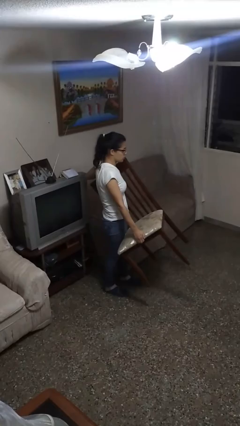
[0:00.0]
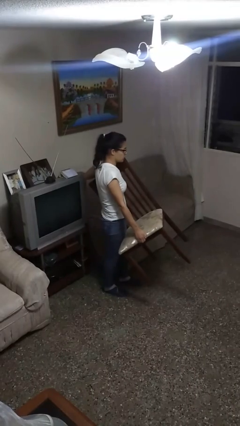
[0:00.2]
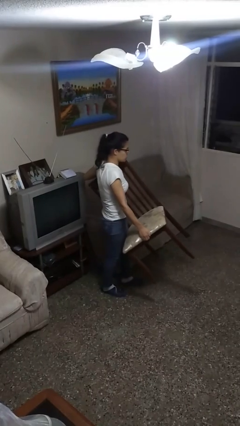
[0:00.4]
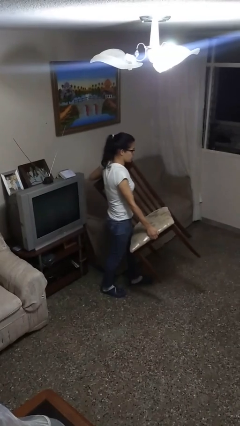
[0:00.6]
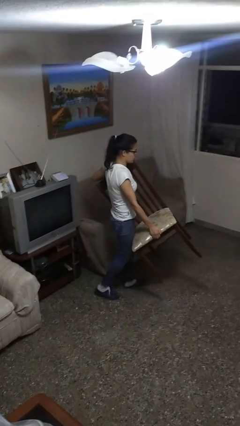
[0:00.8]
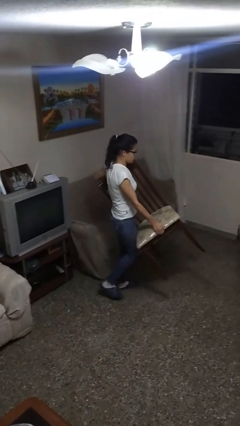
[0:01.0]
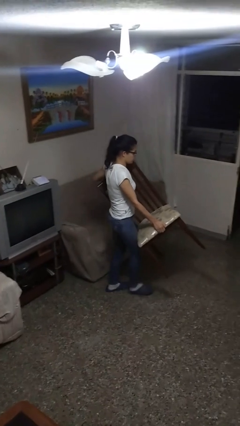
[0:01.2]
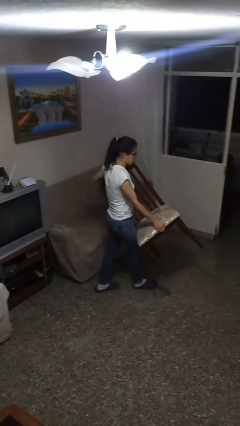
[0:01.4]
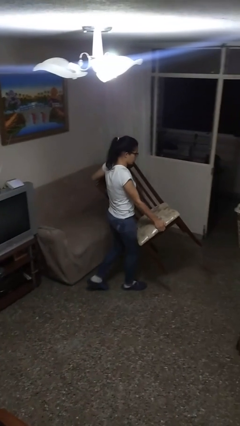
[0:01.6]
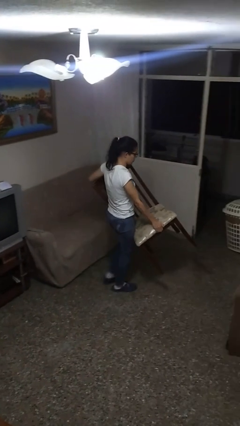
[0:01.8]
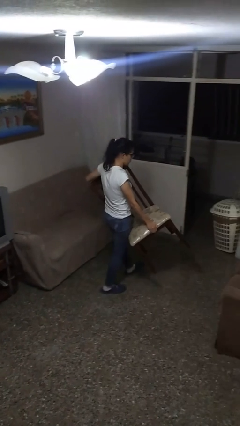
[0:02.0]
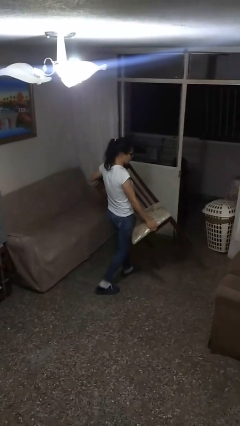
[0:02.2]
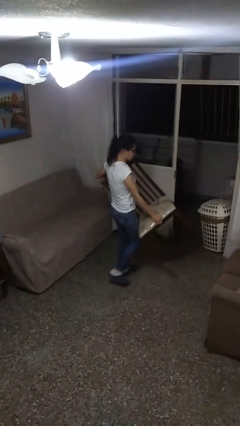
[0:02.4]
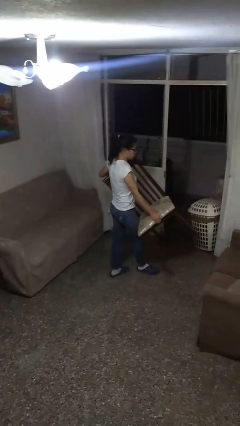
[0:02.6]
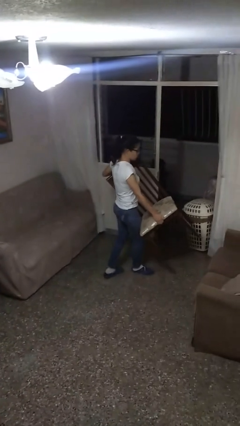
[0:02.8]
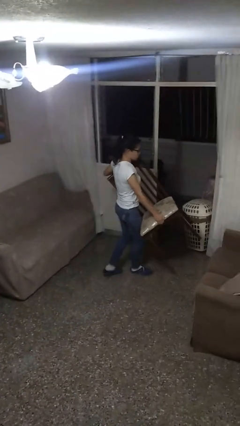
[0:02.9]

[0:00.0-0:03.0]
person carries furniture

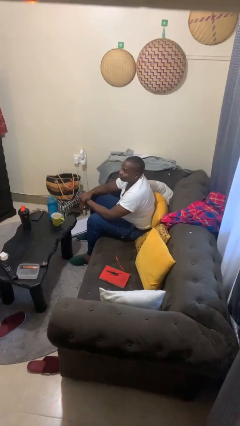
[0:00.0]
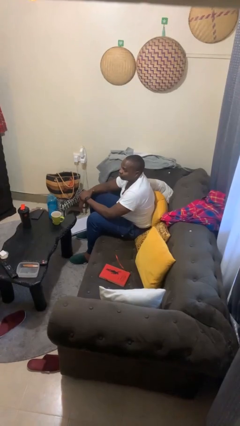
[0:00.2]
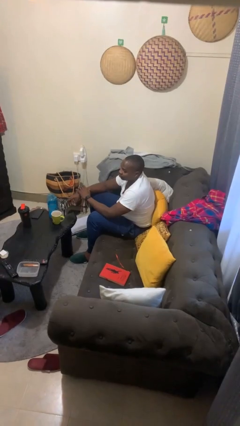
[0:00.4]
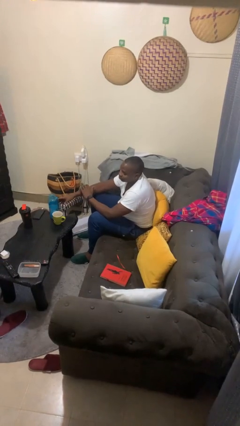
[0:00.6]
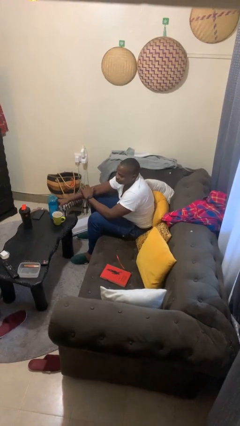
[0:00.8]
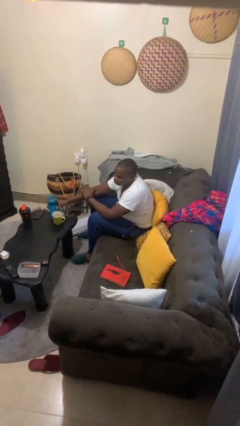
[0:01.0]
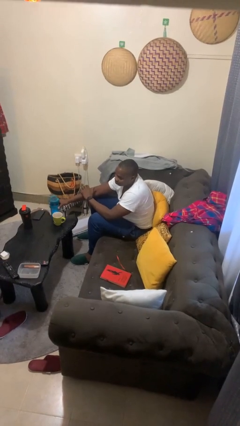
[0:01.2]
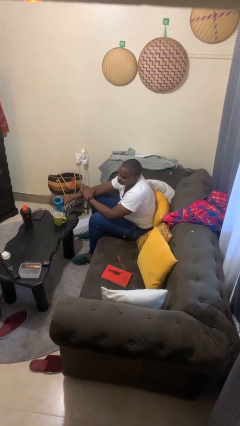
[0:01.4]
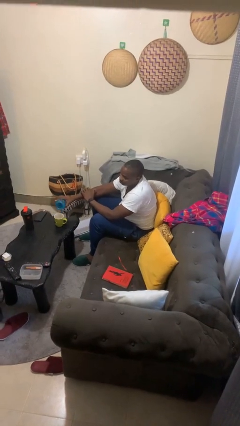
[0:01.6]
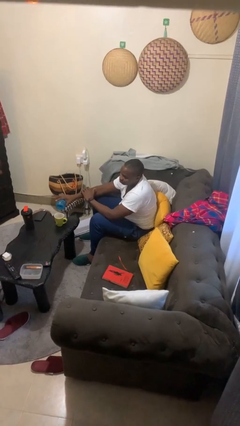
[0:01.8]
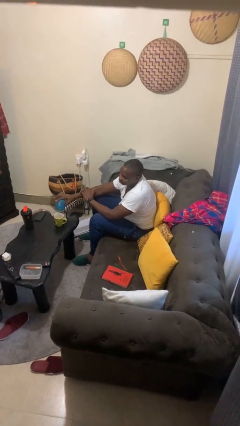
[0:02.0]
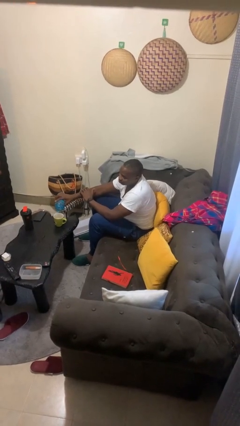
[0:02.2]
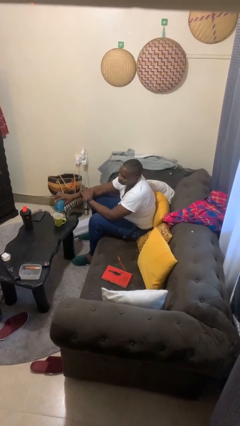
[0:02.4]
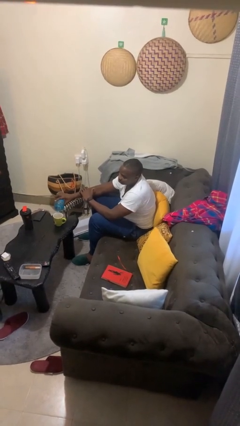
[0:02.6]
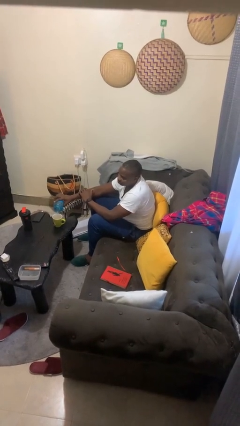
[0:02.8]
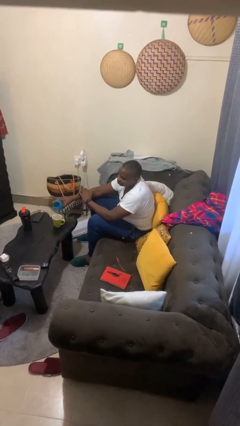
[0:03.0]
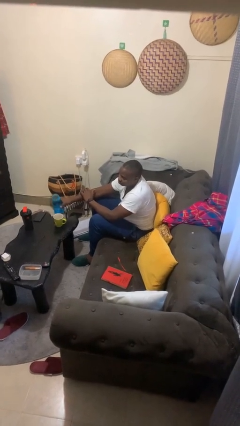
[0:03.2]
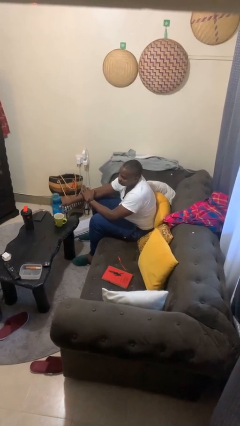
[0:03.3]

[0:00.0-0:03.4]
person pours liquid into cup

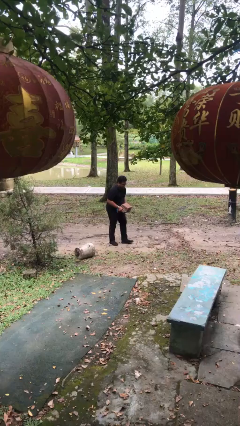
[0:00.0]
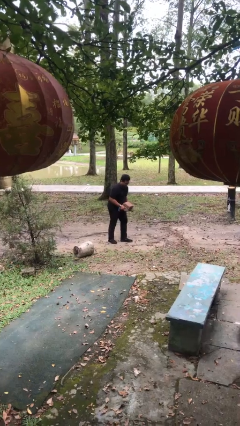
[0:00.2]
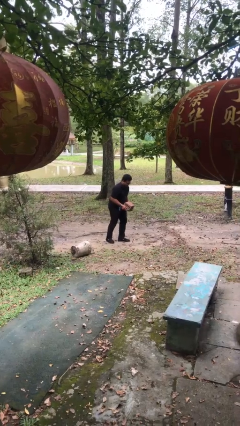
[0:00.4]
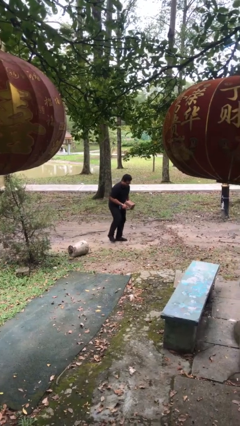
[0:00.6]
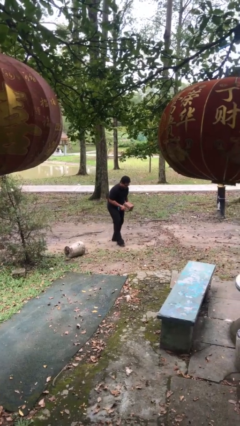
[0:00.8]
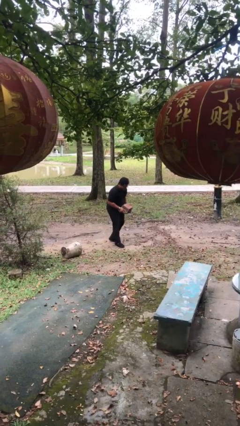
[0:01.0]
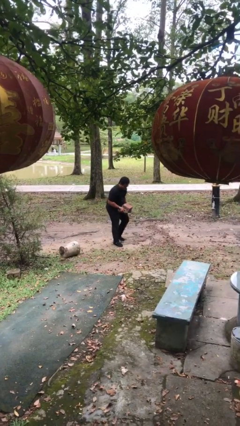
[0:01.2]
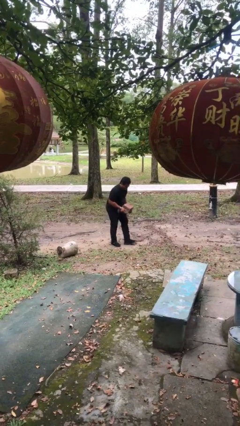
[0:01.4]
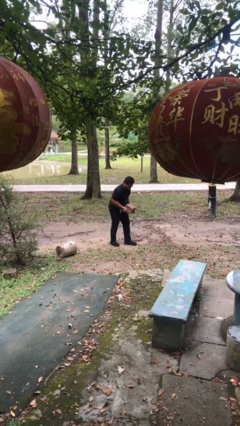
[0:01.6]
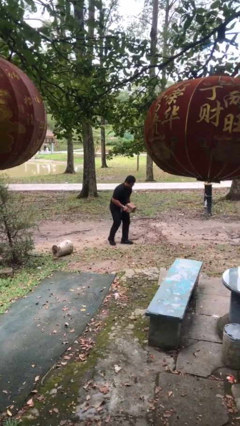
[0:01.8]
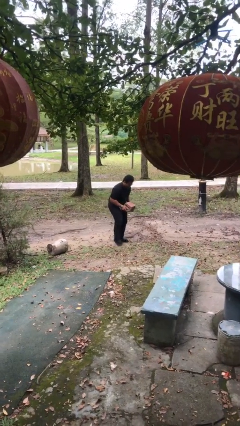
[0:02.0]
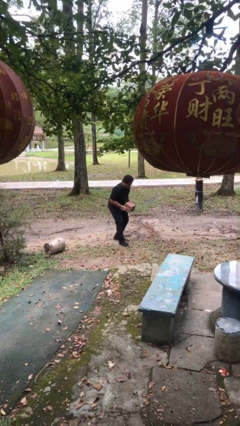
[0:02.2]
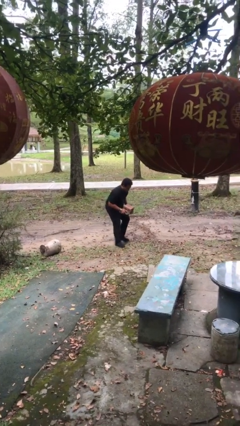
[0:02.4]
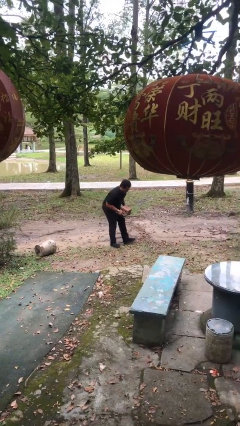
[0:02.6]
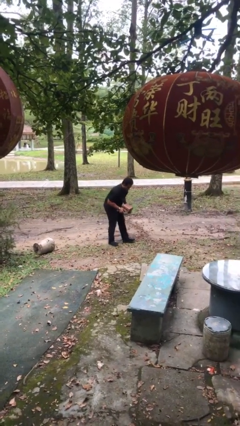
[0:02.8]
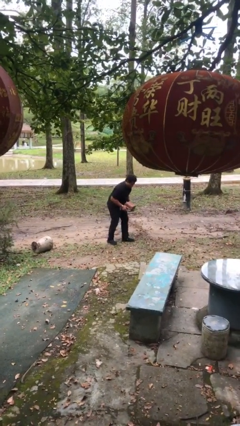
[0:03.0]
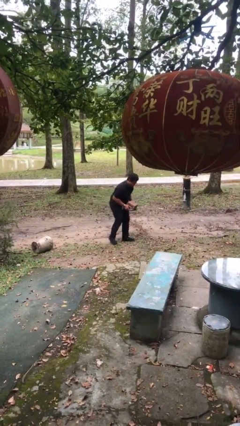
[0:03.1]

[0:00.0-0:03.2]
person carries heavy object

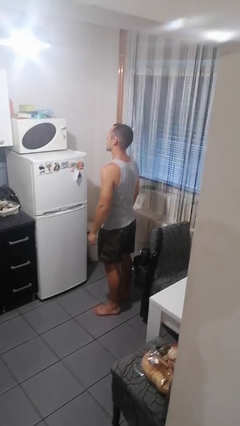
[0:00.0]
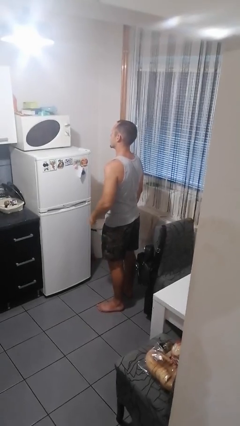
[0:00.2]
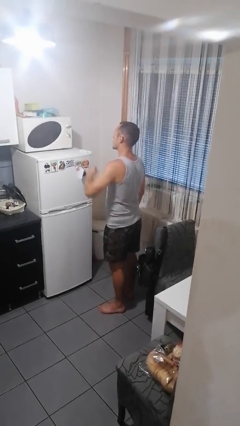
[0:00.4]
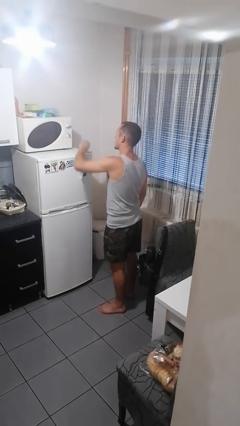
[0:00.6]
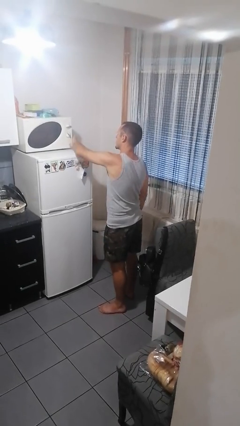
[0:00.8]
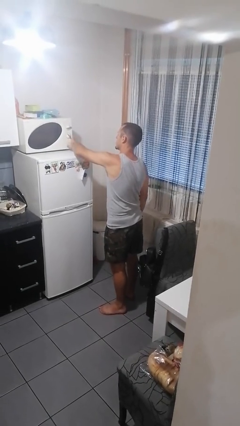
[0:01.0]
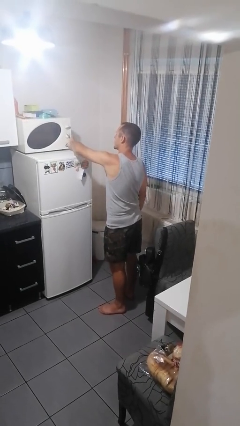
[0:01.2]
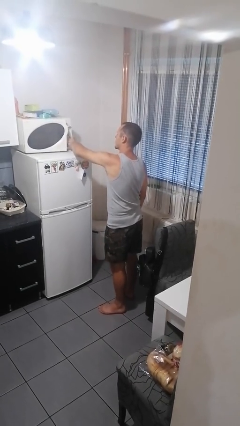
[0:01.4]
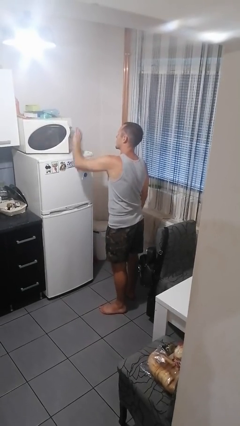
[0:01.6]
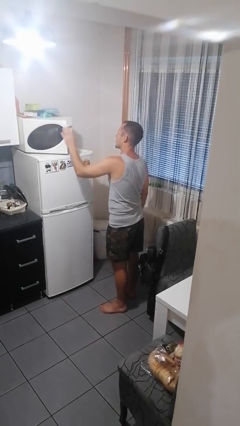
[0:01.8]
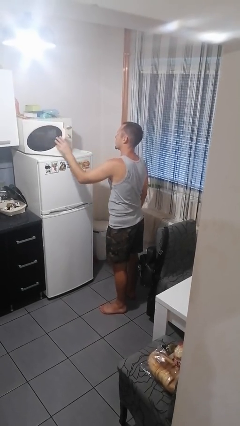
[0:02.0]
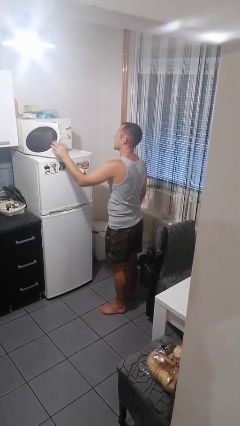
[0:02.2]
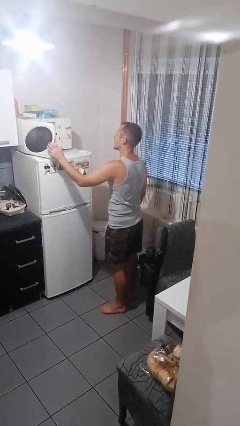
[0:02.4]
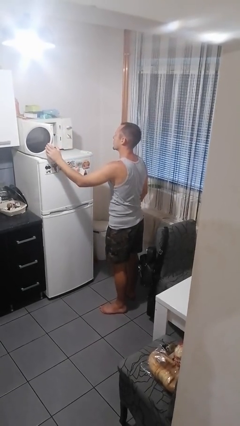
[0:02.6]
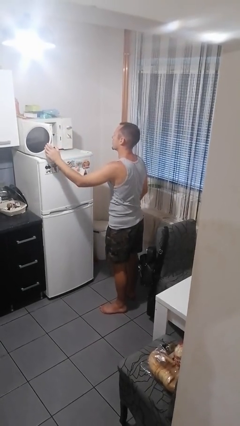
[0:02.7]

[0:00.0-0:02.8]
person opens microwave

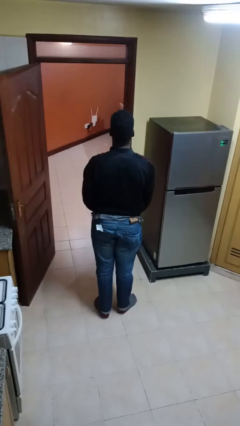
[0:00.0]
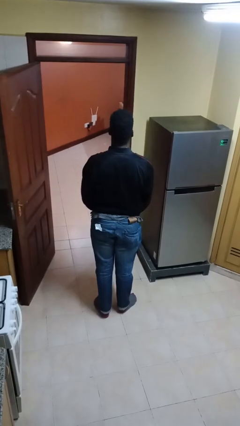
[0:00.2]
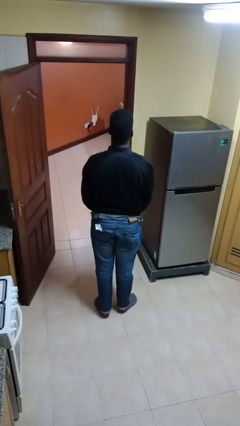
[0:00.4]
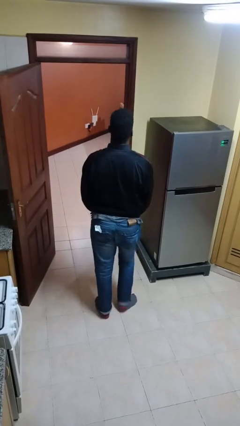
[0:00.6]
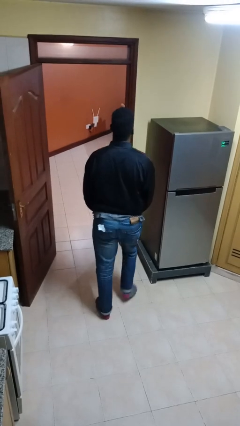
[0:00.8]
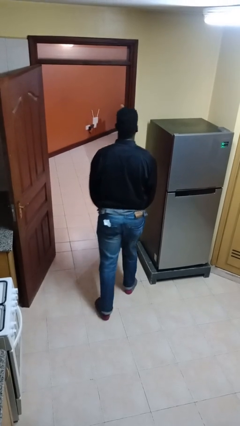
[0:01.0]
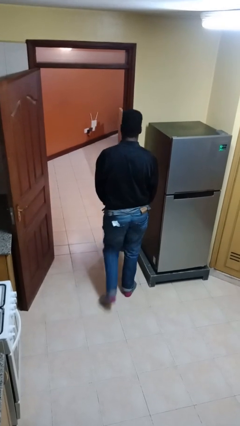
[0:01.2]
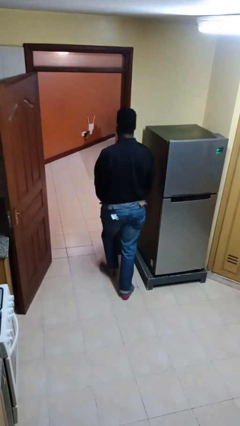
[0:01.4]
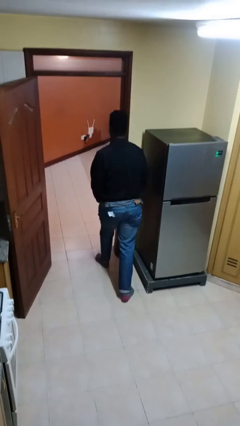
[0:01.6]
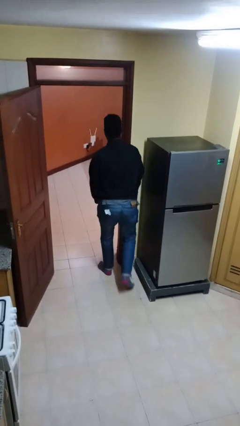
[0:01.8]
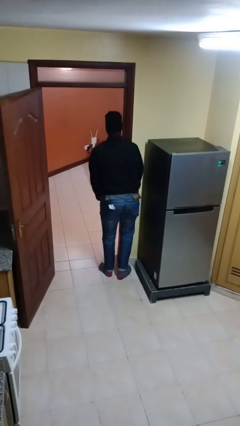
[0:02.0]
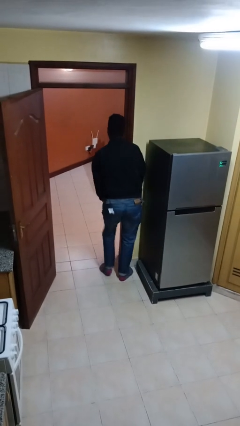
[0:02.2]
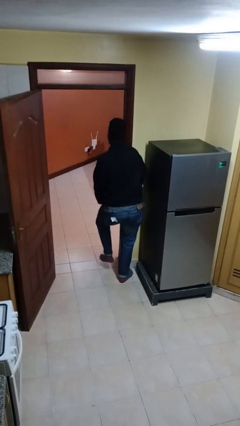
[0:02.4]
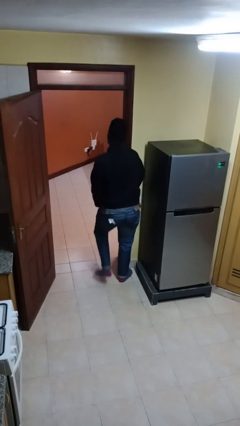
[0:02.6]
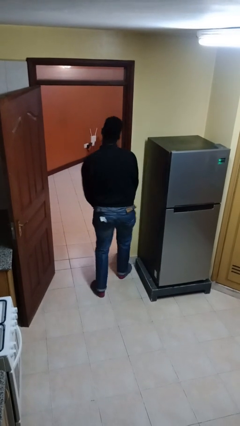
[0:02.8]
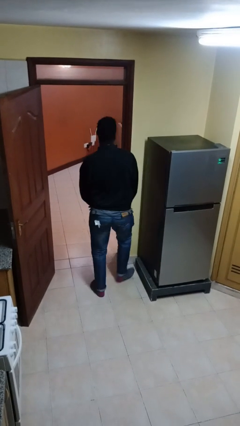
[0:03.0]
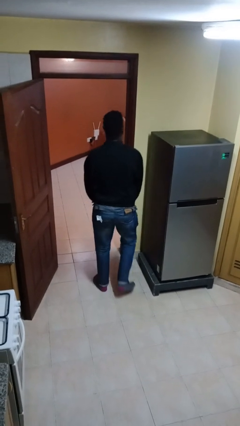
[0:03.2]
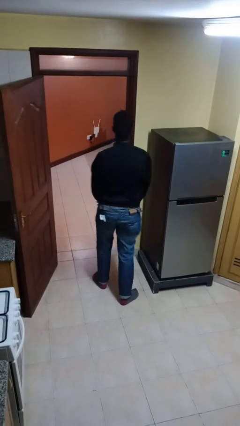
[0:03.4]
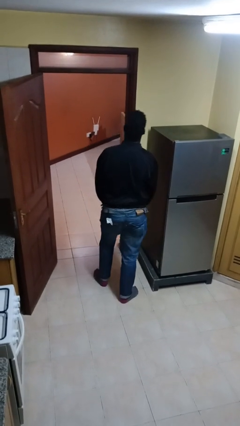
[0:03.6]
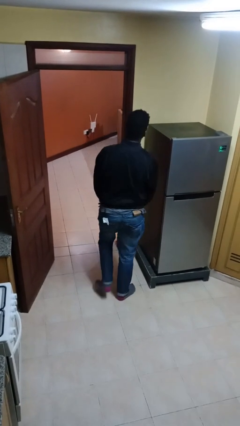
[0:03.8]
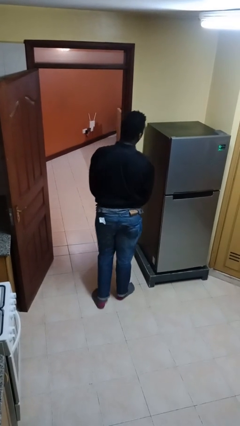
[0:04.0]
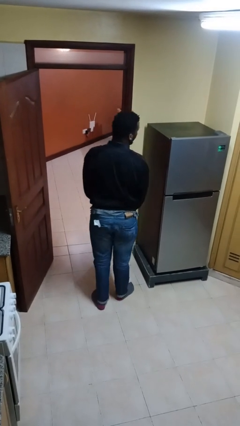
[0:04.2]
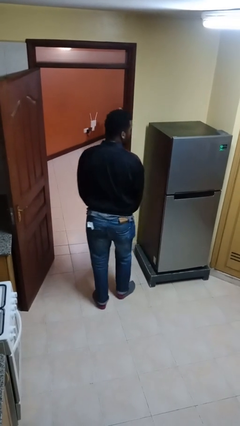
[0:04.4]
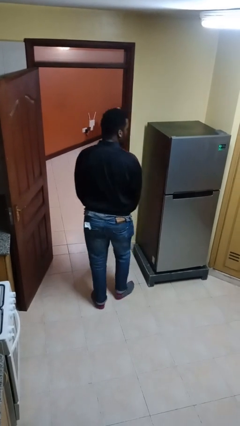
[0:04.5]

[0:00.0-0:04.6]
person bumps into wall
